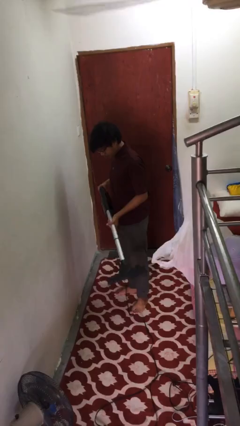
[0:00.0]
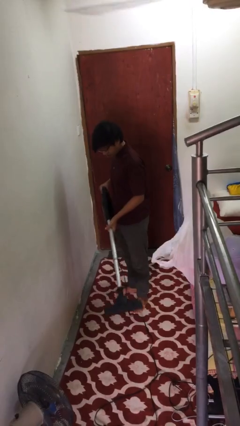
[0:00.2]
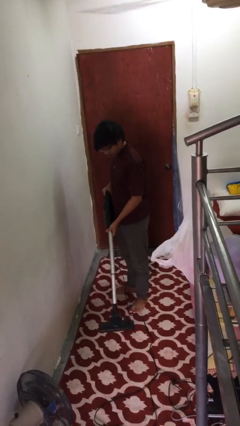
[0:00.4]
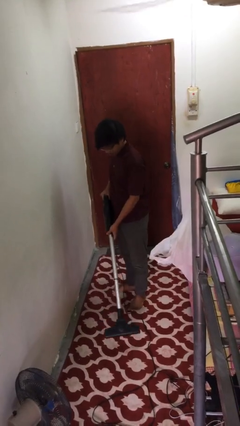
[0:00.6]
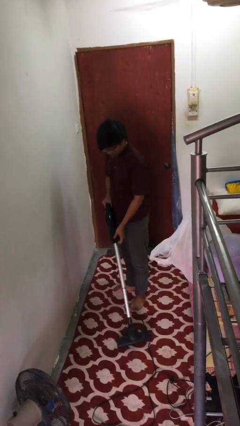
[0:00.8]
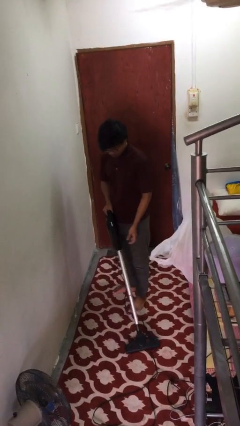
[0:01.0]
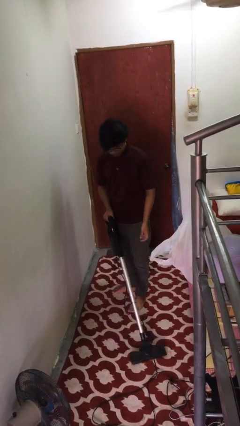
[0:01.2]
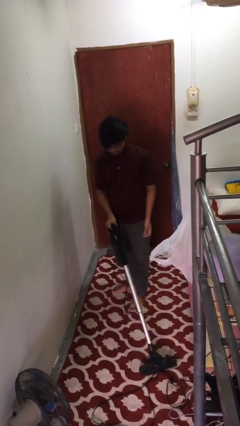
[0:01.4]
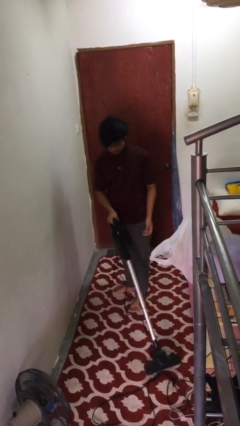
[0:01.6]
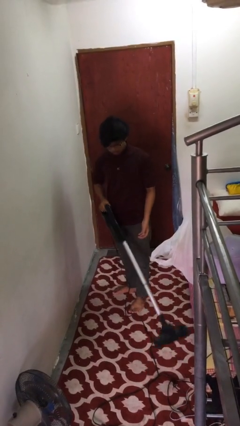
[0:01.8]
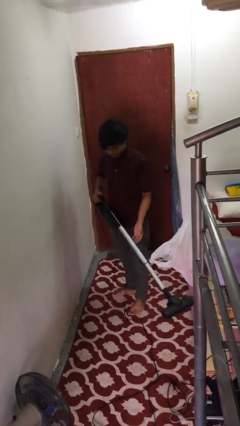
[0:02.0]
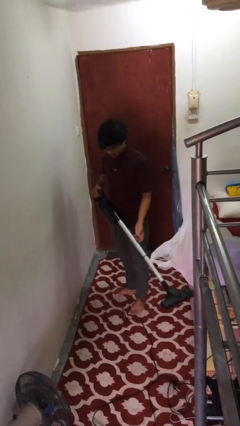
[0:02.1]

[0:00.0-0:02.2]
person vacuums carpet

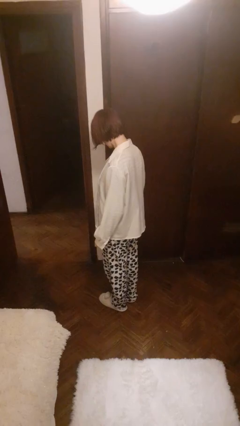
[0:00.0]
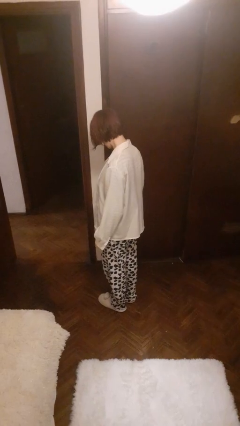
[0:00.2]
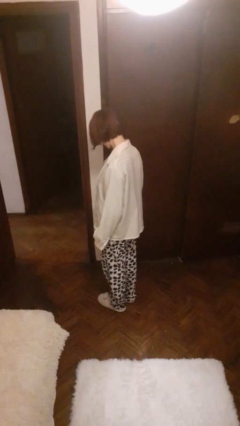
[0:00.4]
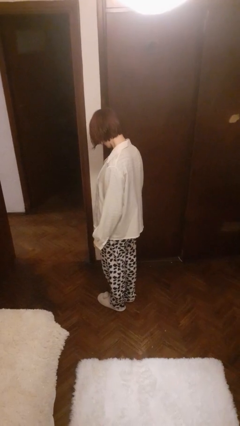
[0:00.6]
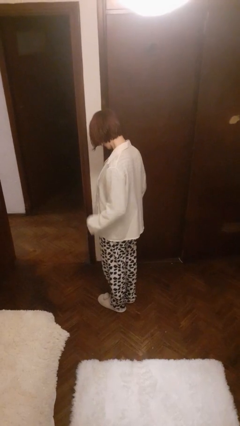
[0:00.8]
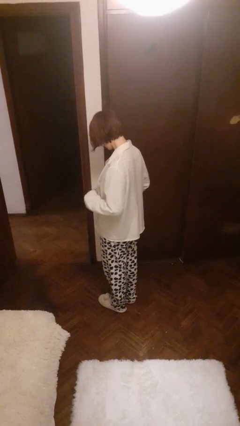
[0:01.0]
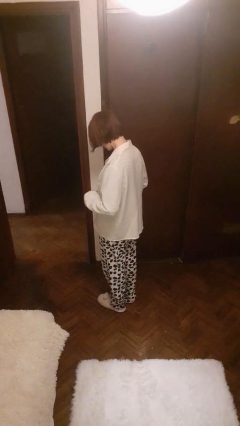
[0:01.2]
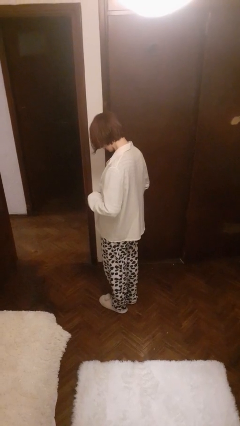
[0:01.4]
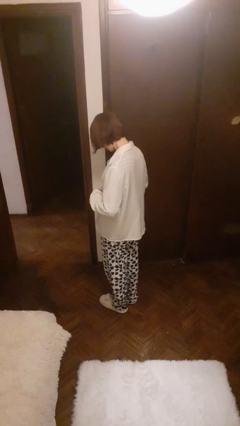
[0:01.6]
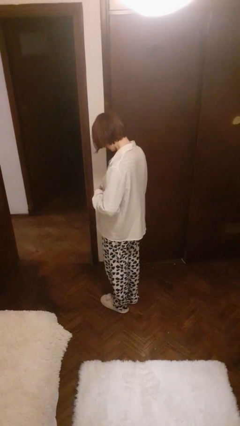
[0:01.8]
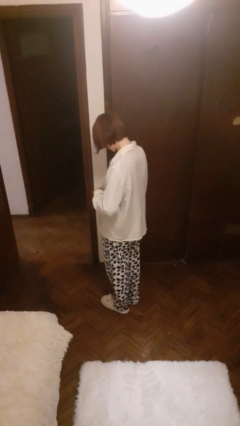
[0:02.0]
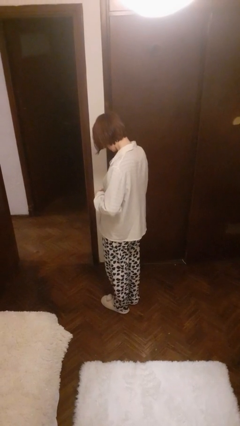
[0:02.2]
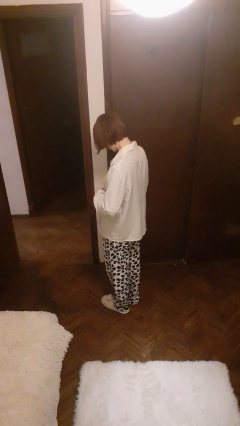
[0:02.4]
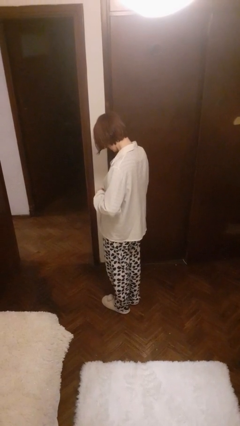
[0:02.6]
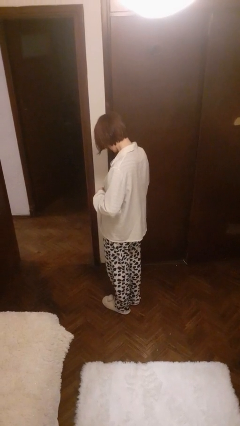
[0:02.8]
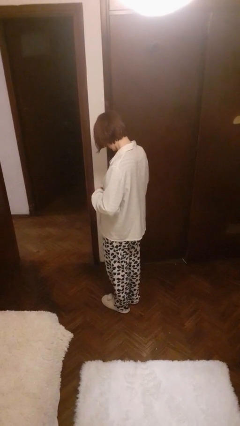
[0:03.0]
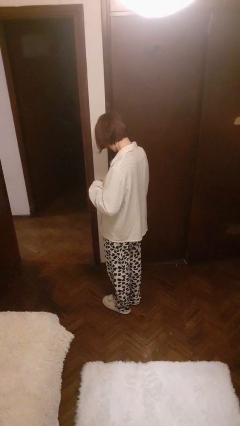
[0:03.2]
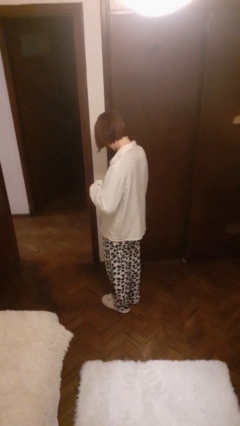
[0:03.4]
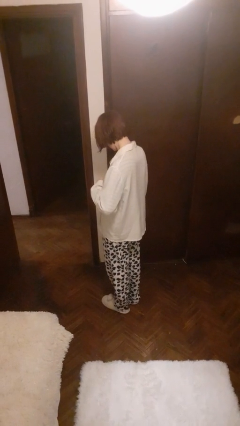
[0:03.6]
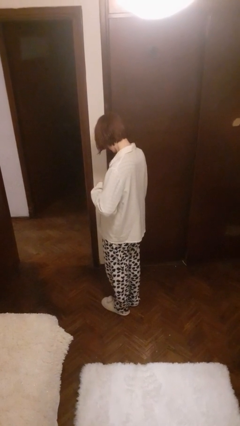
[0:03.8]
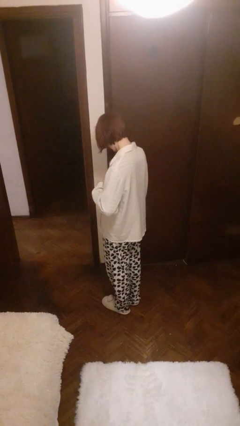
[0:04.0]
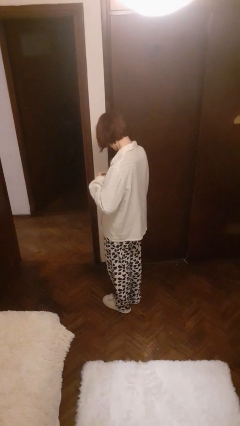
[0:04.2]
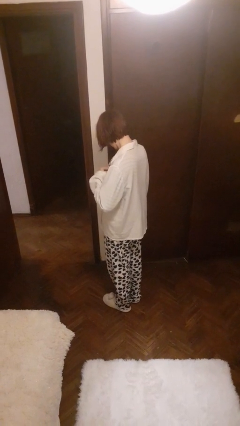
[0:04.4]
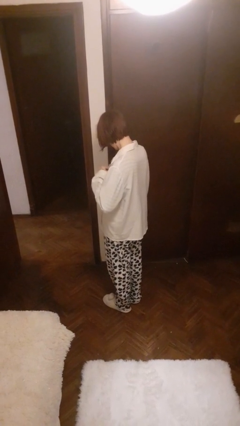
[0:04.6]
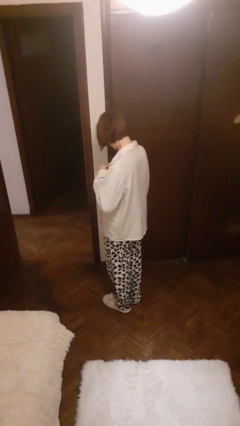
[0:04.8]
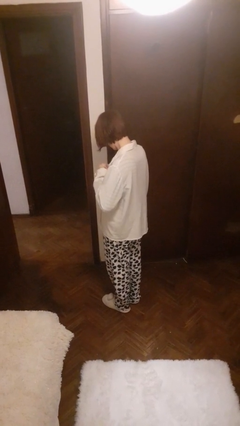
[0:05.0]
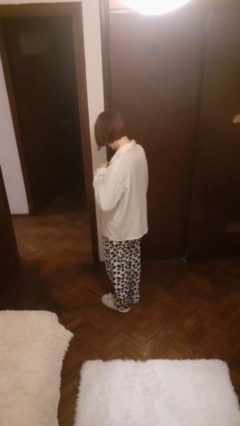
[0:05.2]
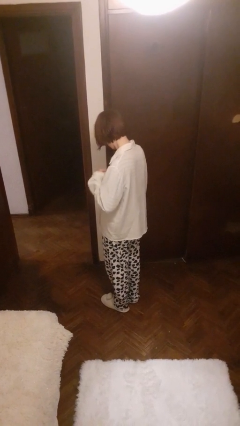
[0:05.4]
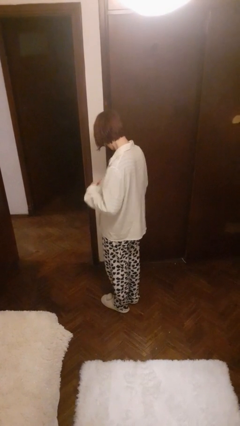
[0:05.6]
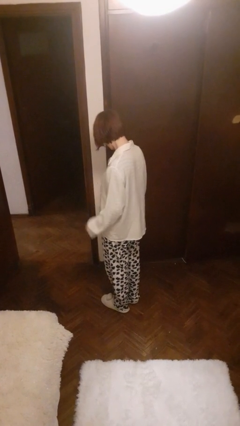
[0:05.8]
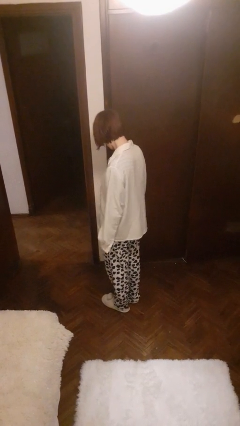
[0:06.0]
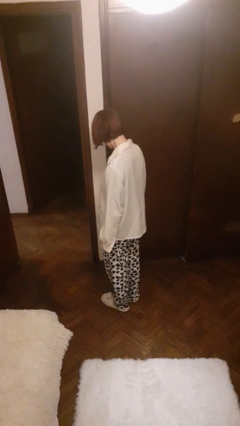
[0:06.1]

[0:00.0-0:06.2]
person buttons shirt

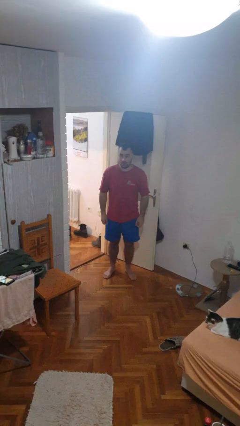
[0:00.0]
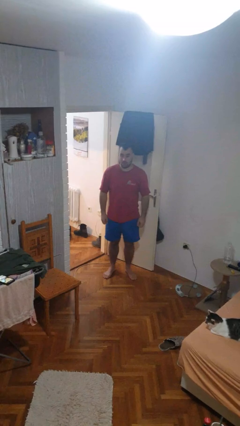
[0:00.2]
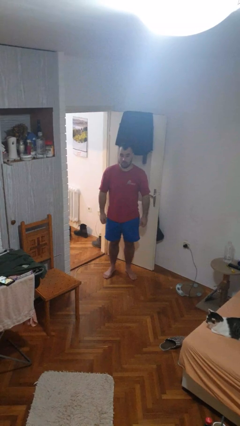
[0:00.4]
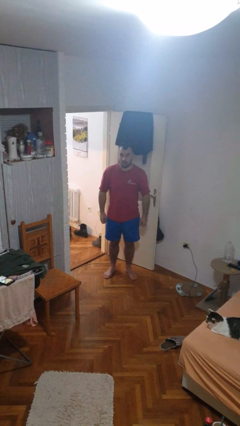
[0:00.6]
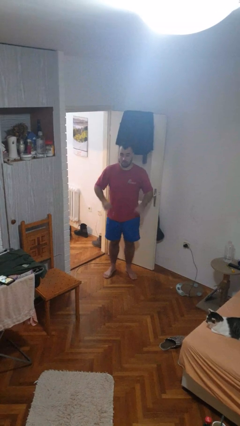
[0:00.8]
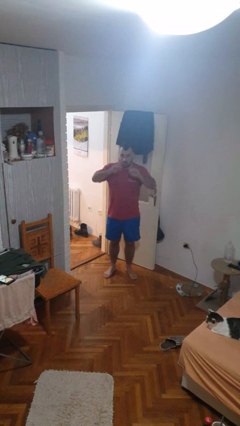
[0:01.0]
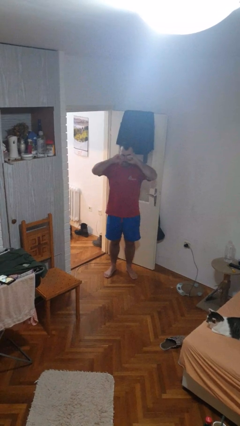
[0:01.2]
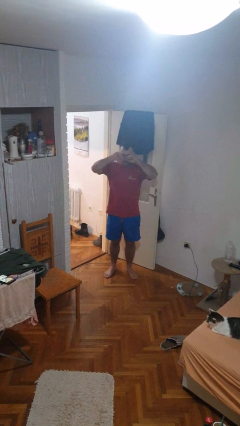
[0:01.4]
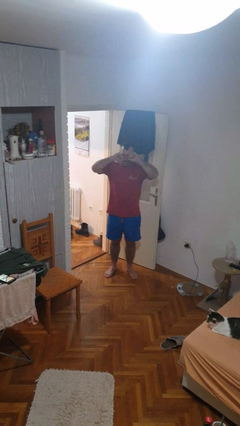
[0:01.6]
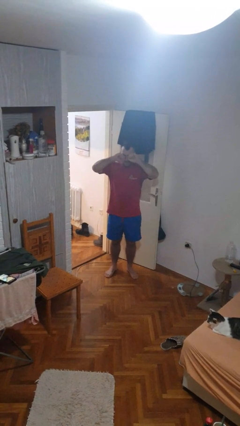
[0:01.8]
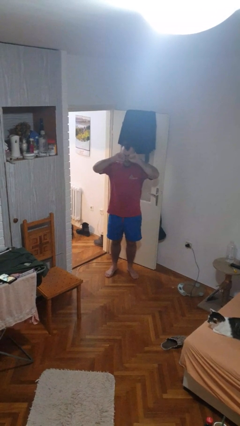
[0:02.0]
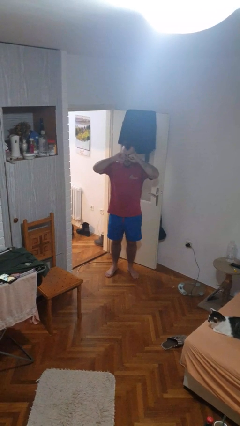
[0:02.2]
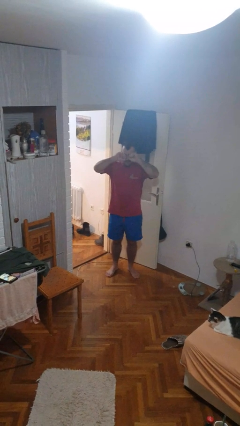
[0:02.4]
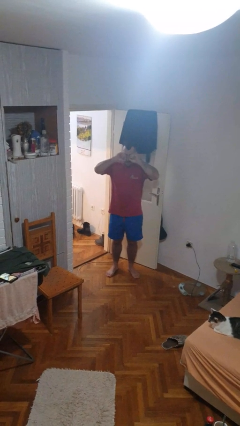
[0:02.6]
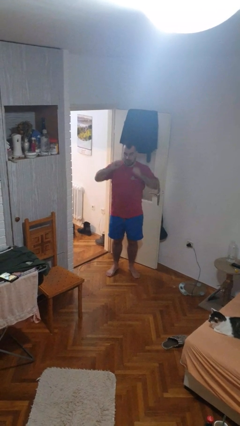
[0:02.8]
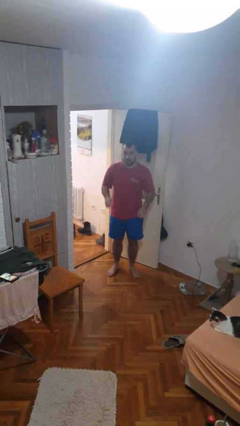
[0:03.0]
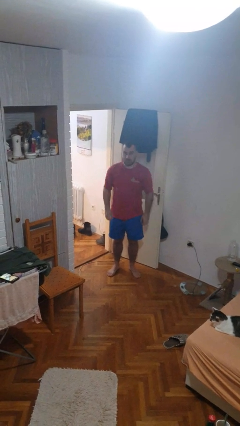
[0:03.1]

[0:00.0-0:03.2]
person rubs eyes

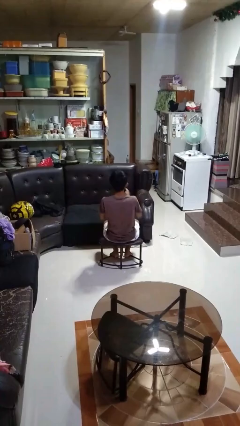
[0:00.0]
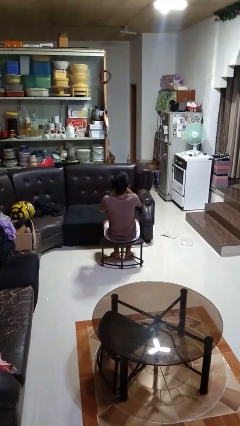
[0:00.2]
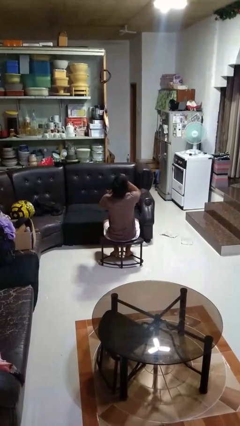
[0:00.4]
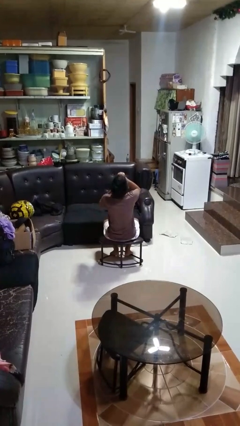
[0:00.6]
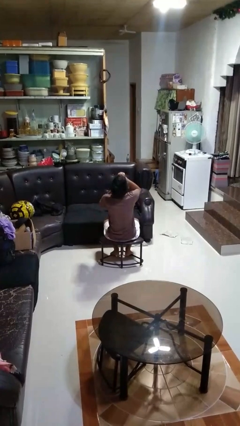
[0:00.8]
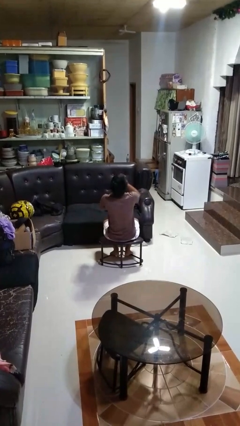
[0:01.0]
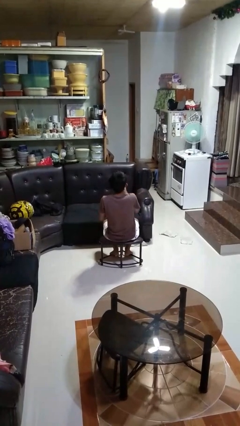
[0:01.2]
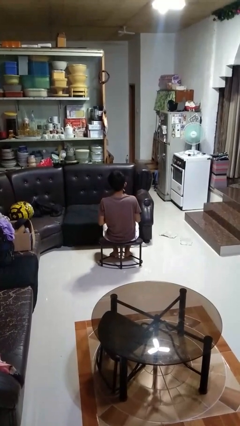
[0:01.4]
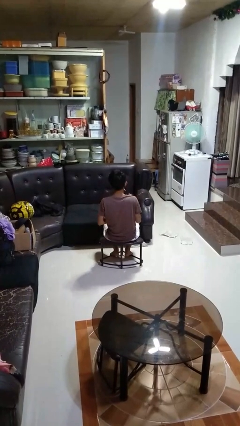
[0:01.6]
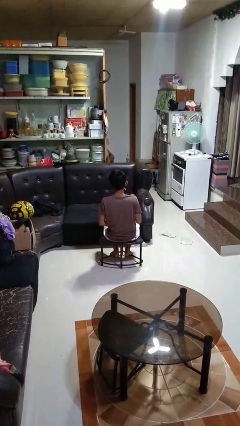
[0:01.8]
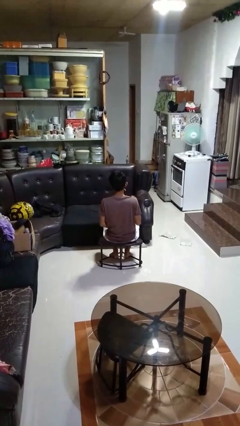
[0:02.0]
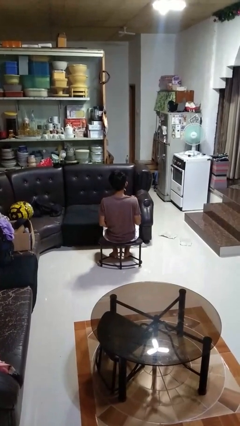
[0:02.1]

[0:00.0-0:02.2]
person drinks from beverage can

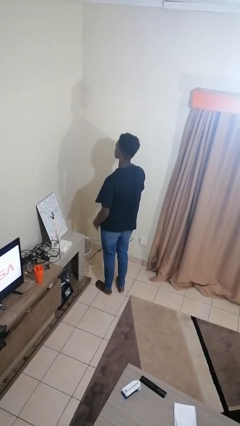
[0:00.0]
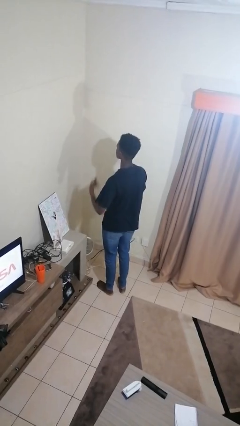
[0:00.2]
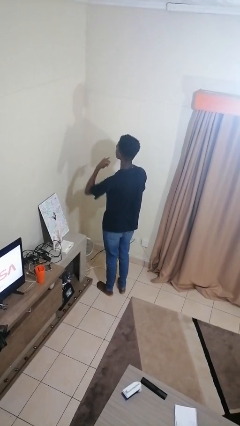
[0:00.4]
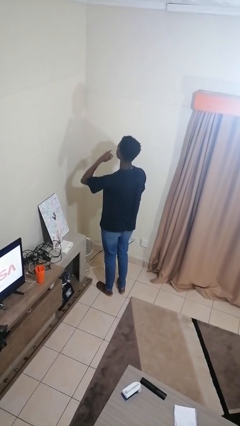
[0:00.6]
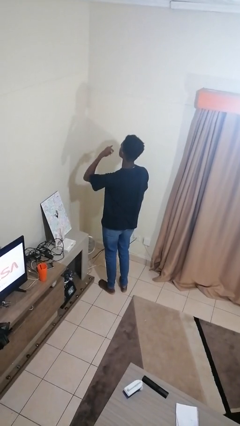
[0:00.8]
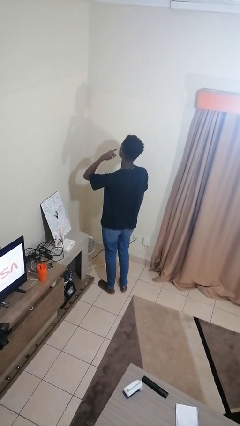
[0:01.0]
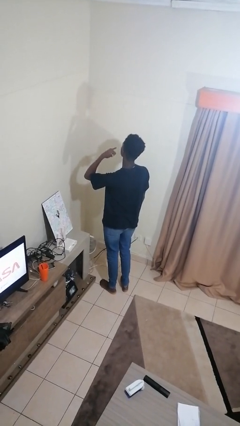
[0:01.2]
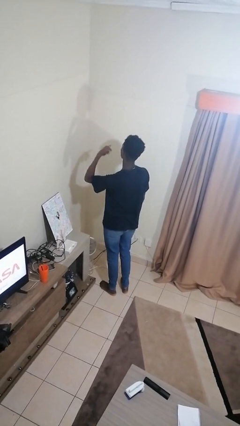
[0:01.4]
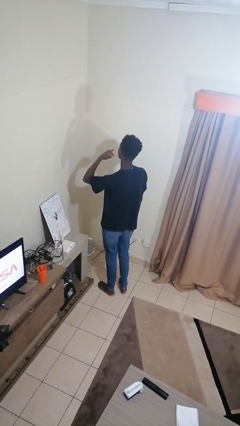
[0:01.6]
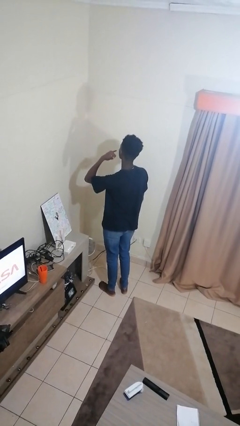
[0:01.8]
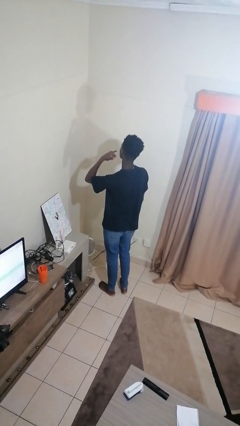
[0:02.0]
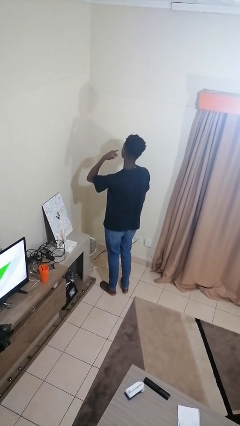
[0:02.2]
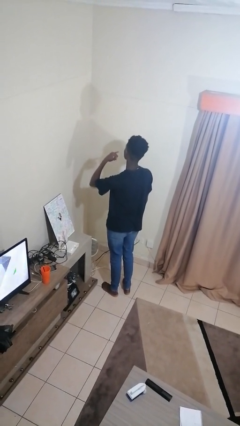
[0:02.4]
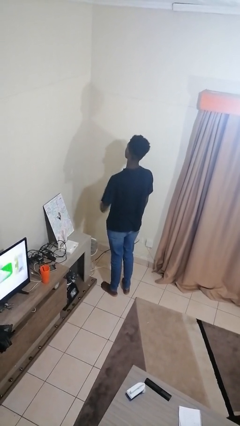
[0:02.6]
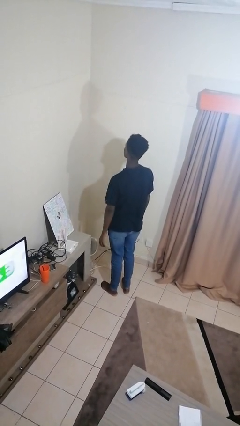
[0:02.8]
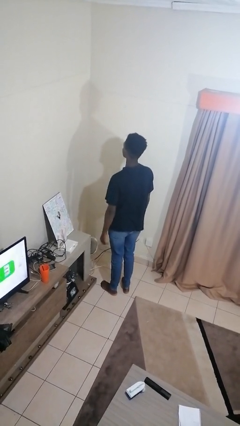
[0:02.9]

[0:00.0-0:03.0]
person gestures call me

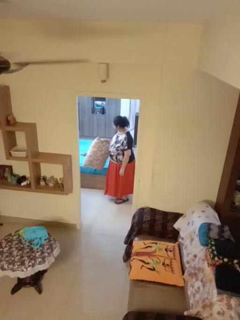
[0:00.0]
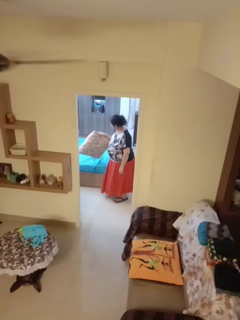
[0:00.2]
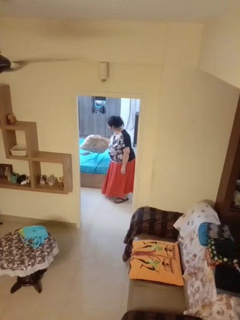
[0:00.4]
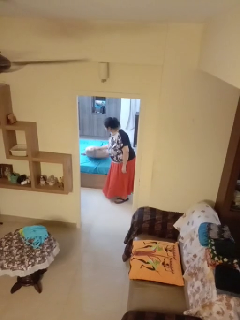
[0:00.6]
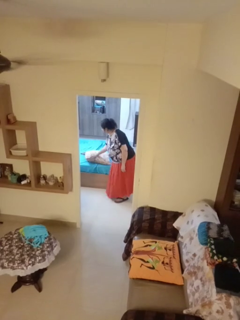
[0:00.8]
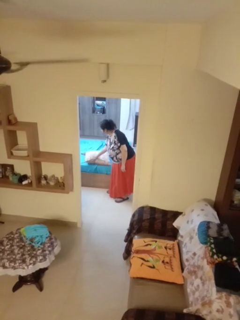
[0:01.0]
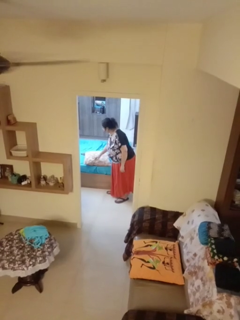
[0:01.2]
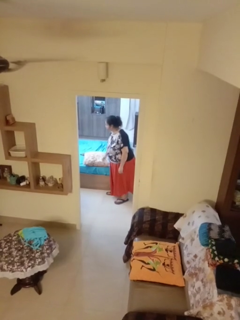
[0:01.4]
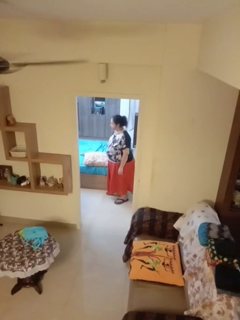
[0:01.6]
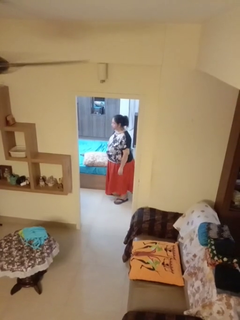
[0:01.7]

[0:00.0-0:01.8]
person puts down object on bed
